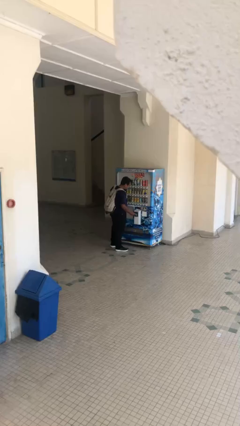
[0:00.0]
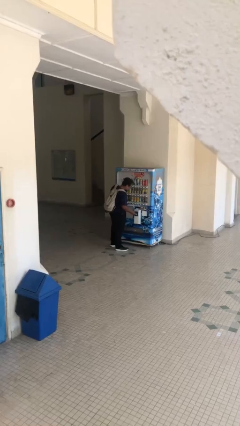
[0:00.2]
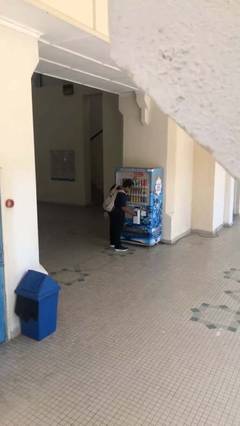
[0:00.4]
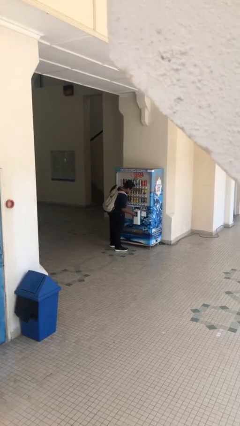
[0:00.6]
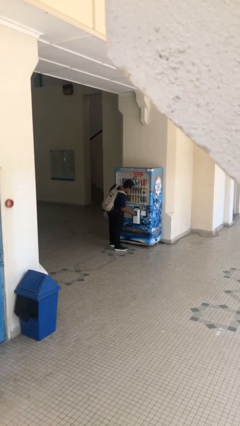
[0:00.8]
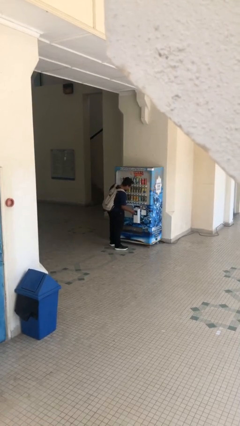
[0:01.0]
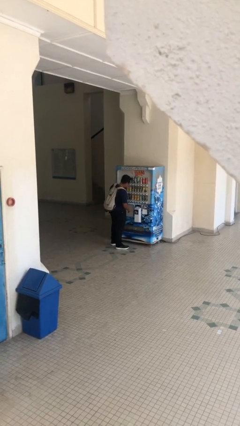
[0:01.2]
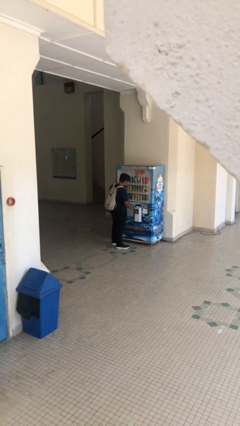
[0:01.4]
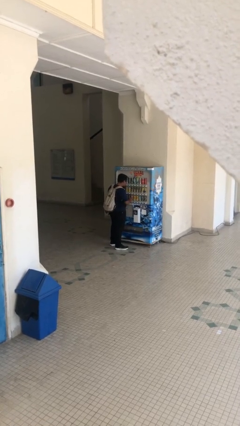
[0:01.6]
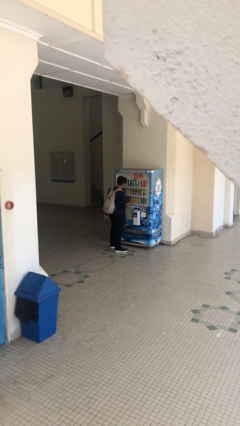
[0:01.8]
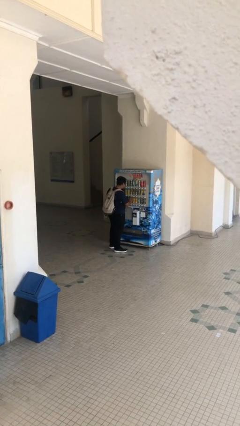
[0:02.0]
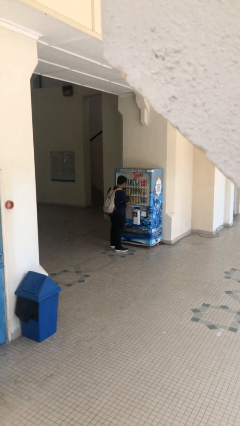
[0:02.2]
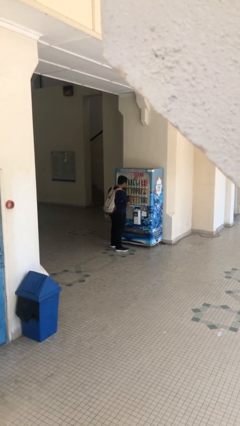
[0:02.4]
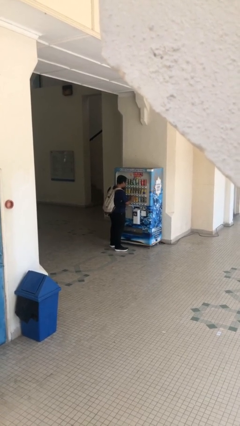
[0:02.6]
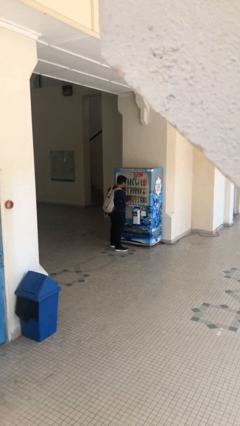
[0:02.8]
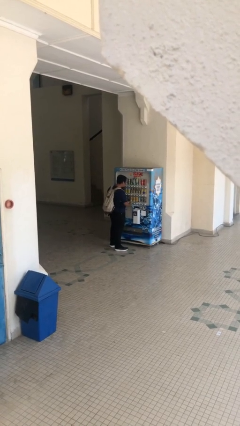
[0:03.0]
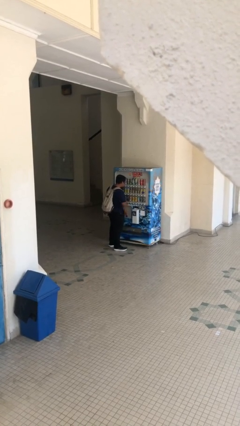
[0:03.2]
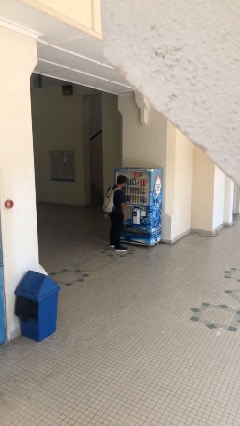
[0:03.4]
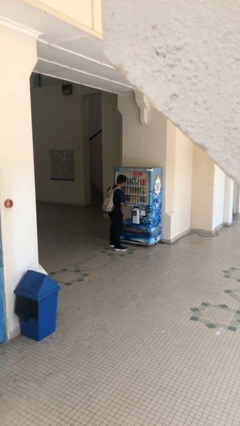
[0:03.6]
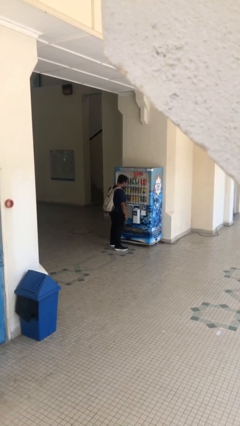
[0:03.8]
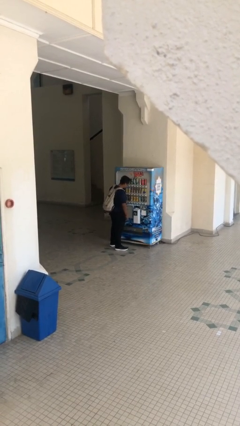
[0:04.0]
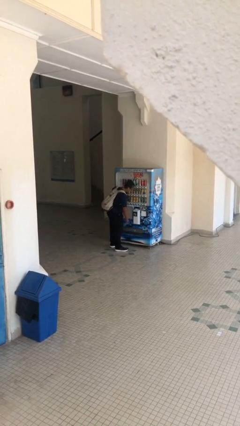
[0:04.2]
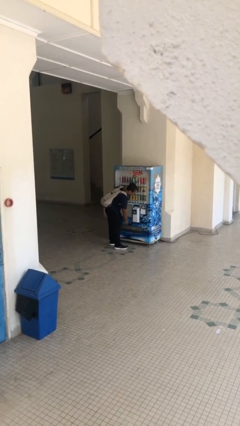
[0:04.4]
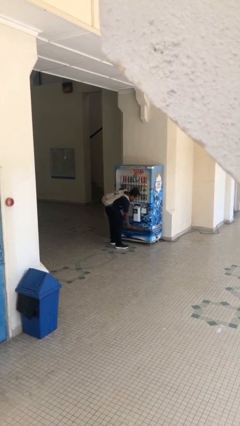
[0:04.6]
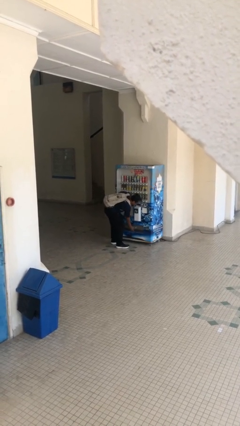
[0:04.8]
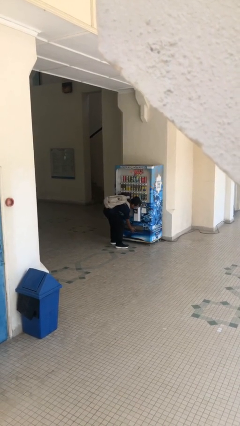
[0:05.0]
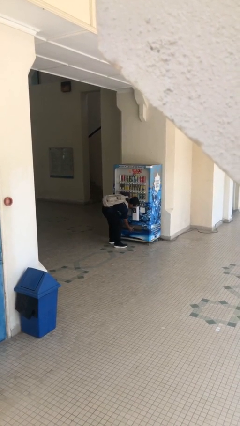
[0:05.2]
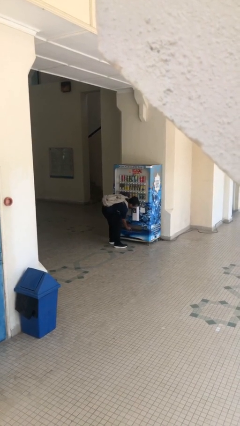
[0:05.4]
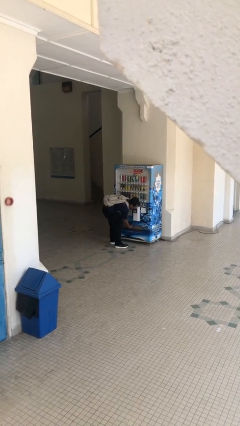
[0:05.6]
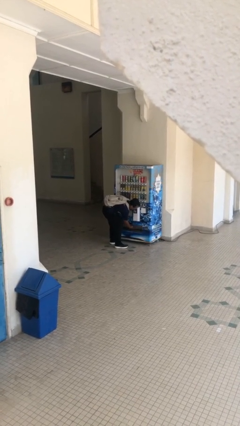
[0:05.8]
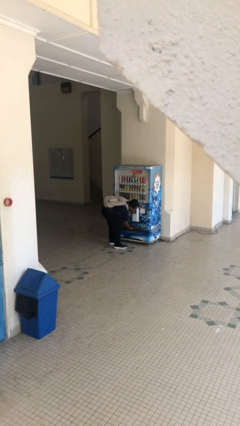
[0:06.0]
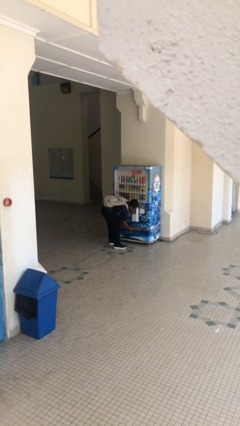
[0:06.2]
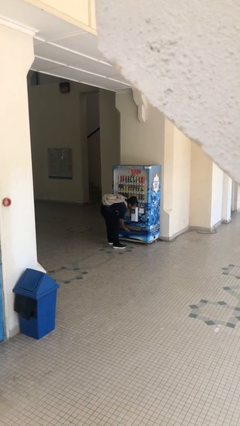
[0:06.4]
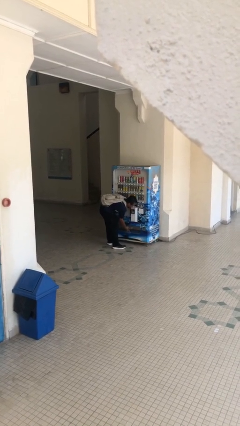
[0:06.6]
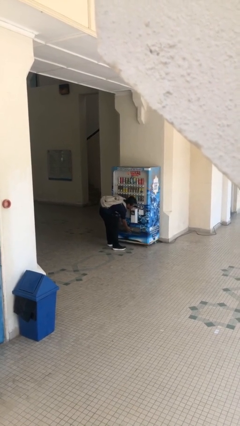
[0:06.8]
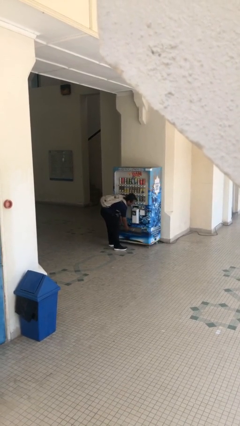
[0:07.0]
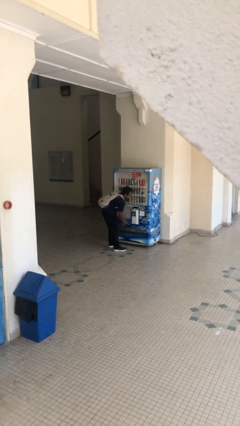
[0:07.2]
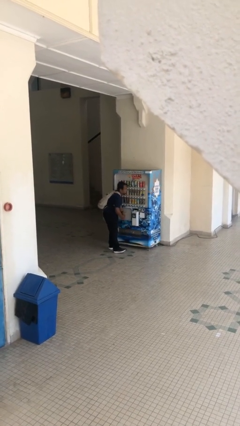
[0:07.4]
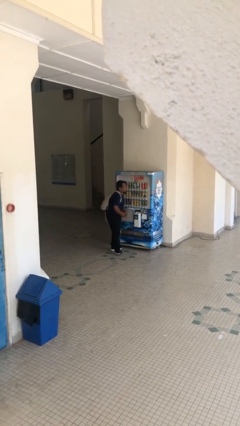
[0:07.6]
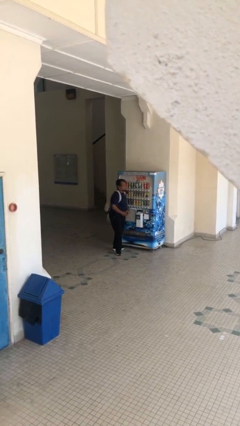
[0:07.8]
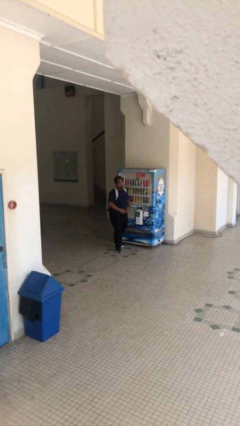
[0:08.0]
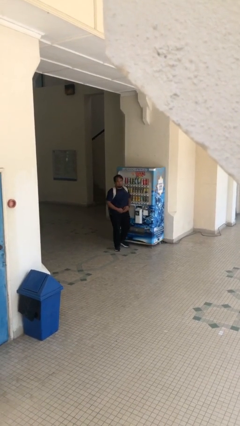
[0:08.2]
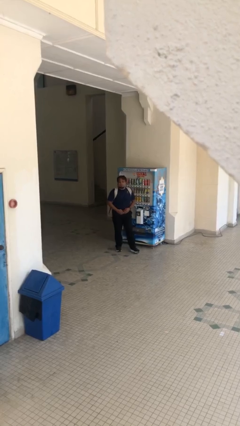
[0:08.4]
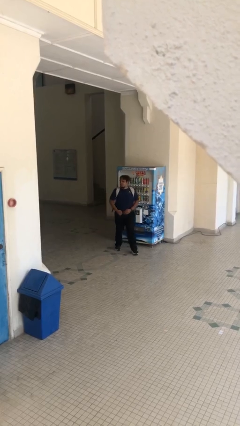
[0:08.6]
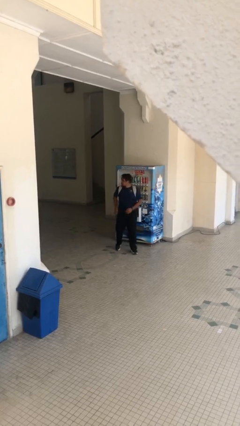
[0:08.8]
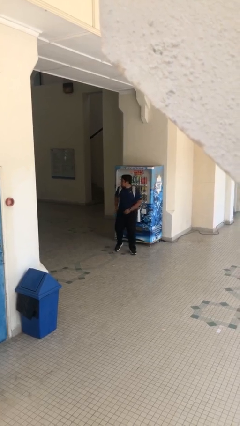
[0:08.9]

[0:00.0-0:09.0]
person purchases from machine

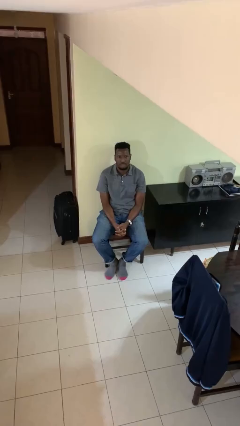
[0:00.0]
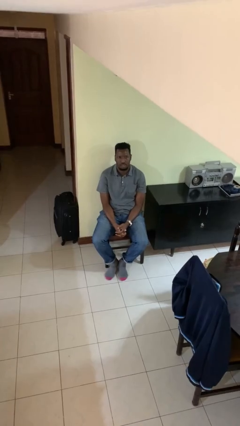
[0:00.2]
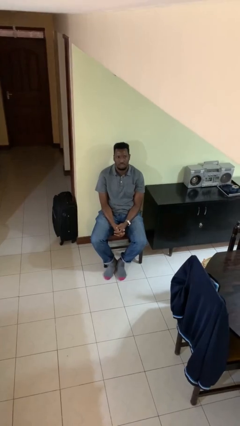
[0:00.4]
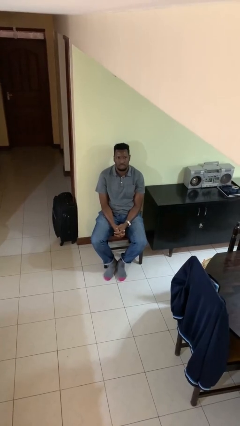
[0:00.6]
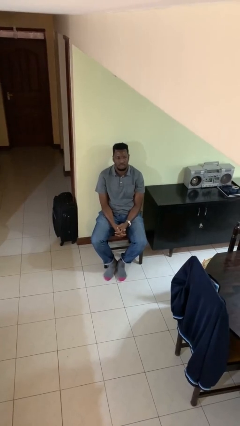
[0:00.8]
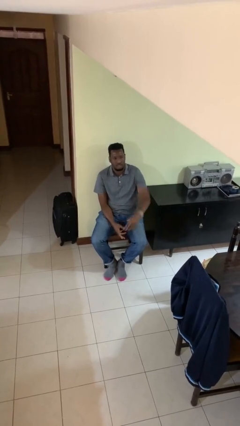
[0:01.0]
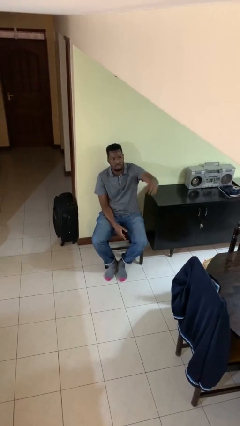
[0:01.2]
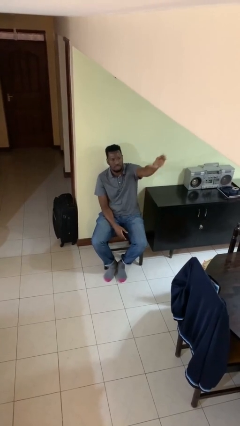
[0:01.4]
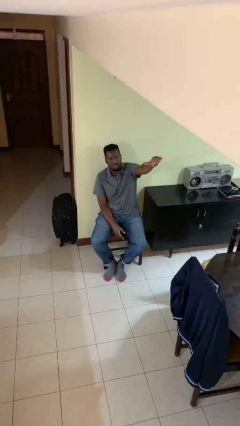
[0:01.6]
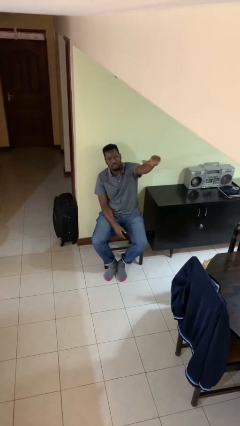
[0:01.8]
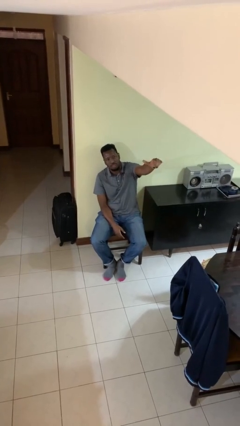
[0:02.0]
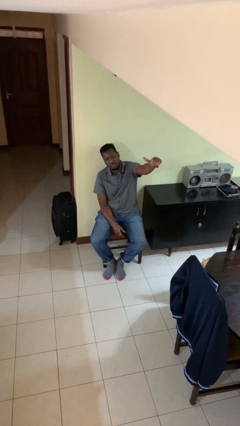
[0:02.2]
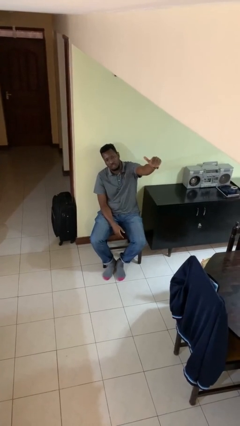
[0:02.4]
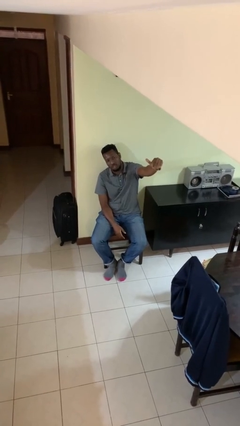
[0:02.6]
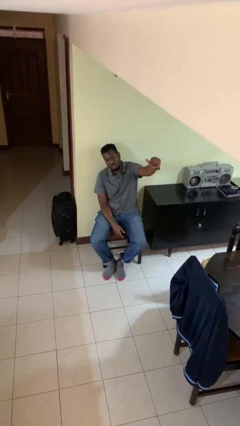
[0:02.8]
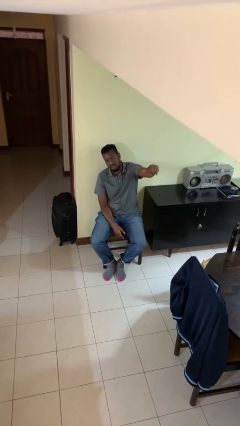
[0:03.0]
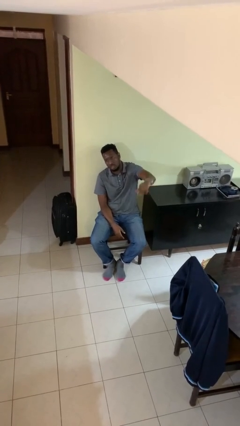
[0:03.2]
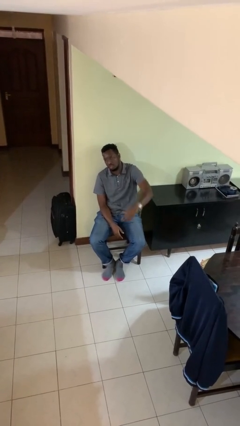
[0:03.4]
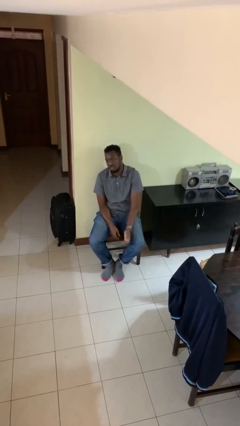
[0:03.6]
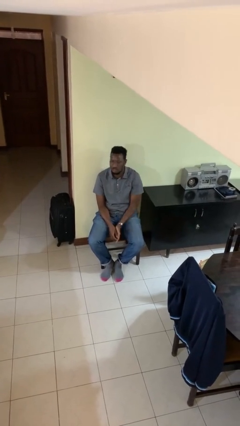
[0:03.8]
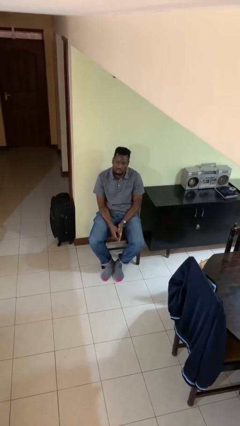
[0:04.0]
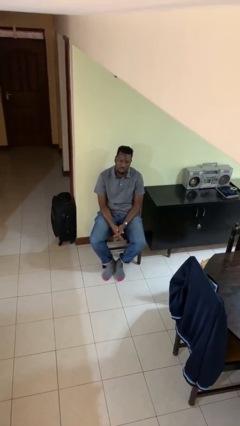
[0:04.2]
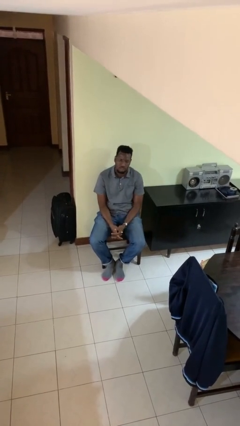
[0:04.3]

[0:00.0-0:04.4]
person gestures come here

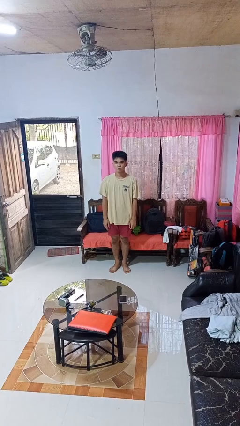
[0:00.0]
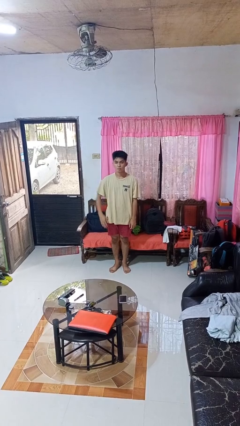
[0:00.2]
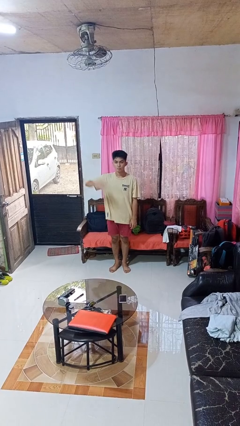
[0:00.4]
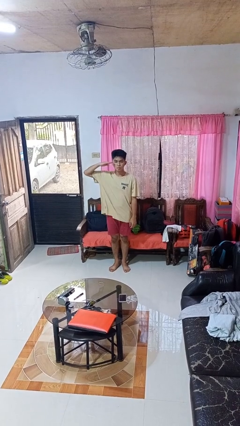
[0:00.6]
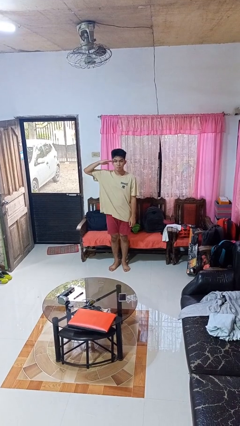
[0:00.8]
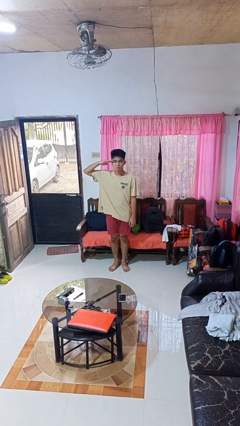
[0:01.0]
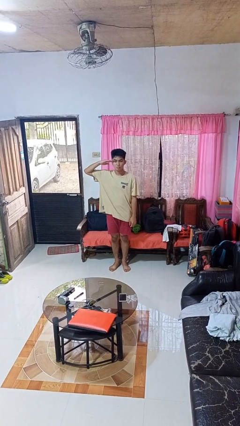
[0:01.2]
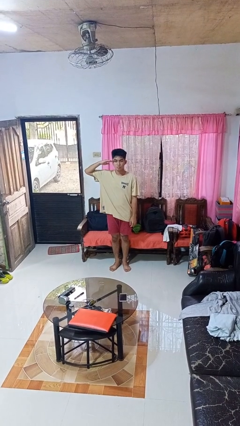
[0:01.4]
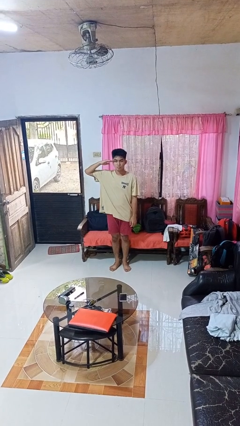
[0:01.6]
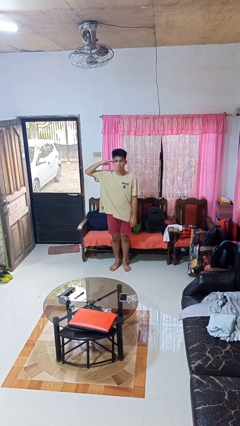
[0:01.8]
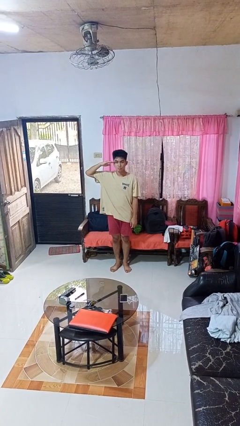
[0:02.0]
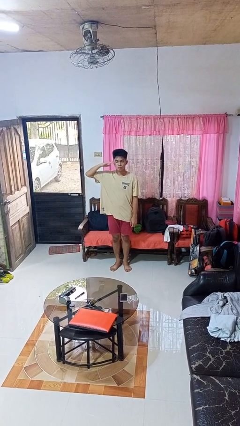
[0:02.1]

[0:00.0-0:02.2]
person salutes

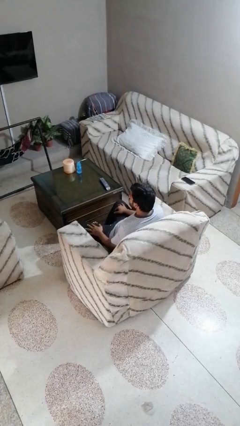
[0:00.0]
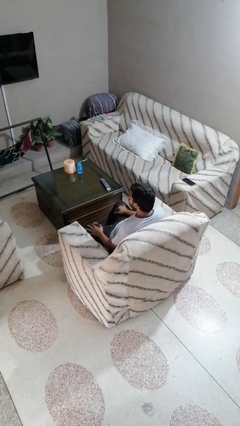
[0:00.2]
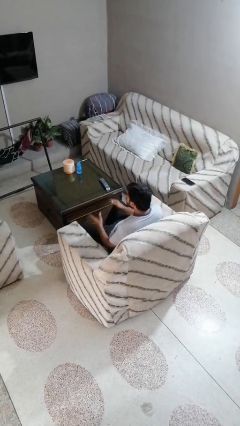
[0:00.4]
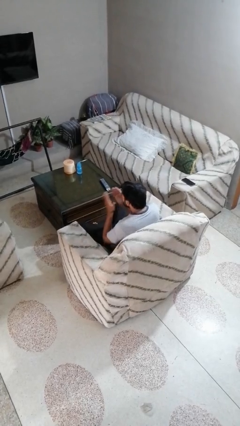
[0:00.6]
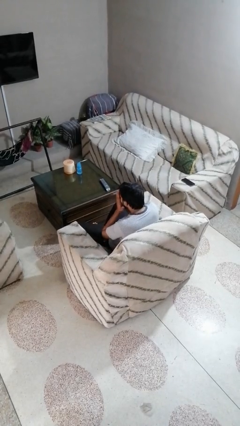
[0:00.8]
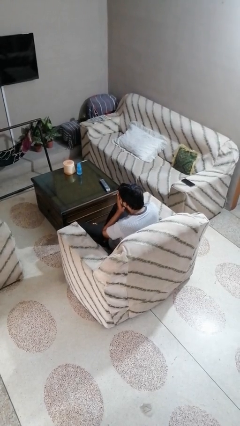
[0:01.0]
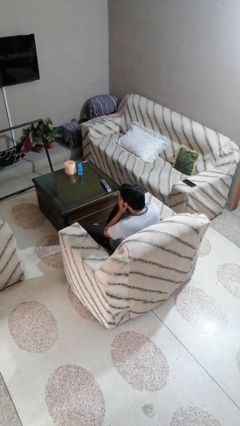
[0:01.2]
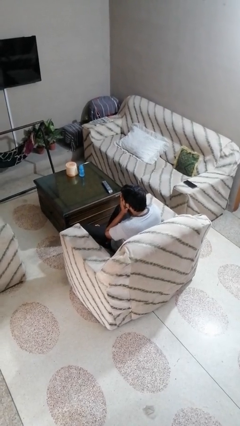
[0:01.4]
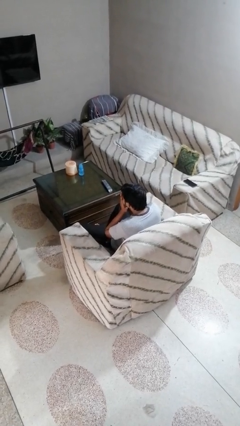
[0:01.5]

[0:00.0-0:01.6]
person covers face with hands

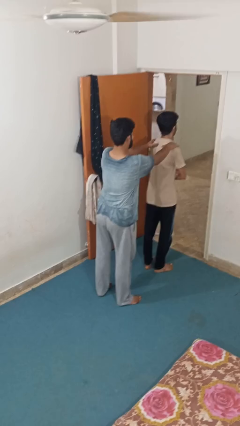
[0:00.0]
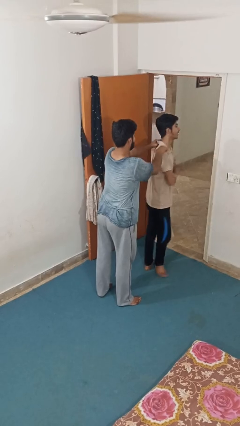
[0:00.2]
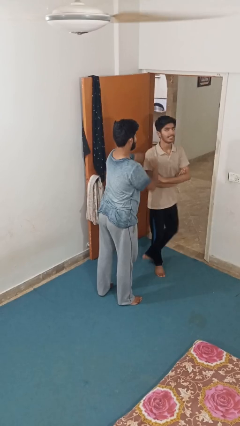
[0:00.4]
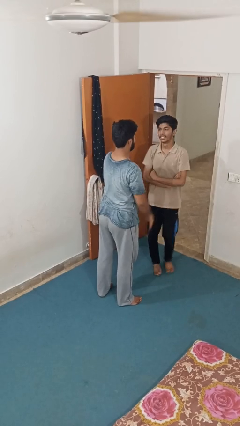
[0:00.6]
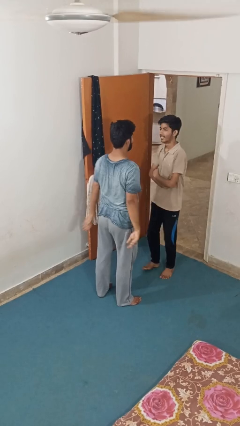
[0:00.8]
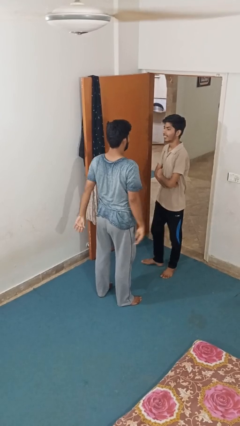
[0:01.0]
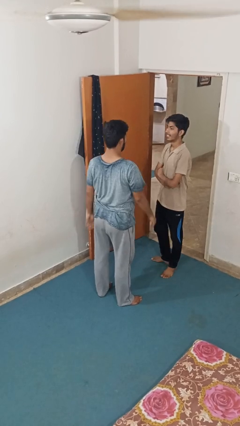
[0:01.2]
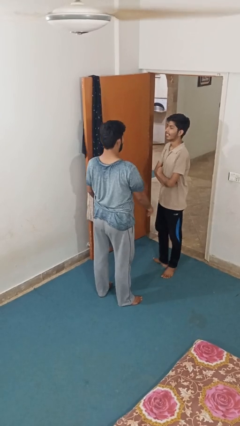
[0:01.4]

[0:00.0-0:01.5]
person spins person around
